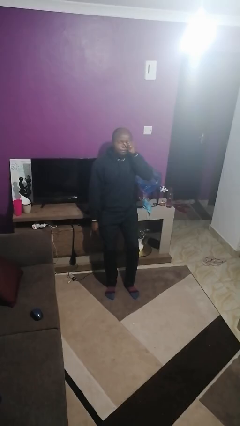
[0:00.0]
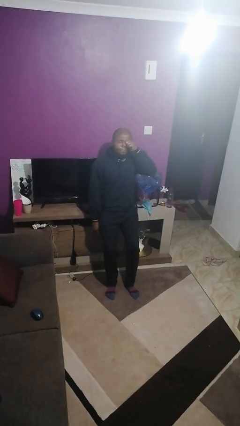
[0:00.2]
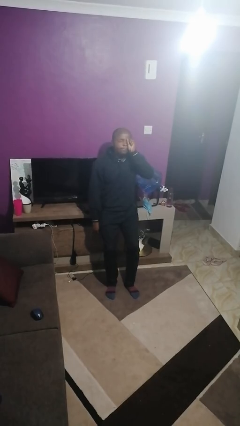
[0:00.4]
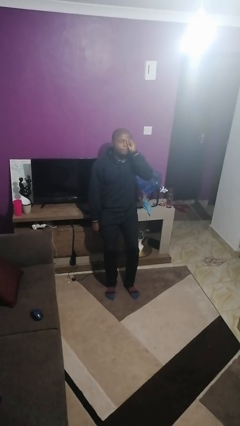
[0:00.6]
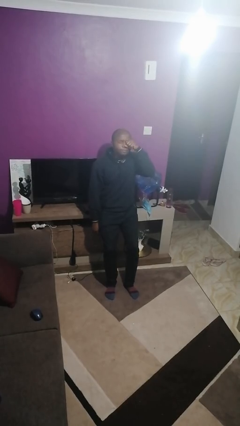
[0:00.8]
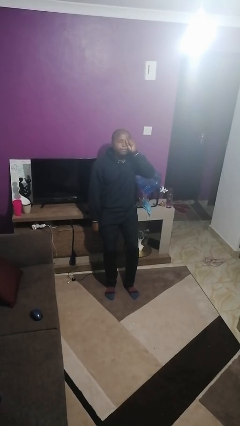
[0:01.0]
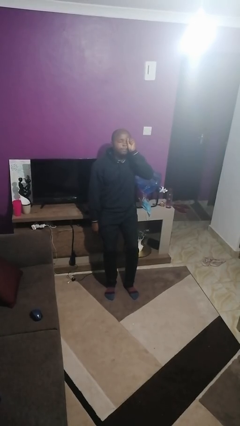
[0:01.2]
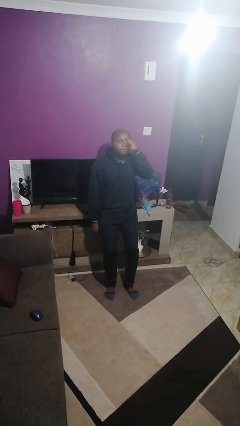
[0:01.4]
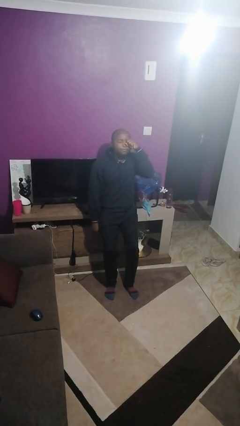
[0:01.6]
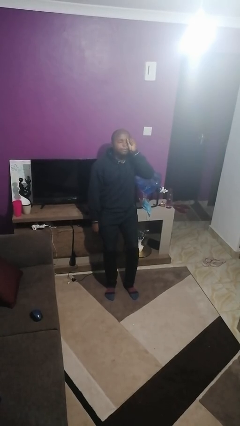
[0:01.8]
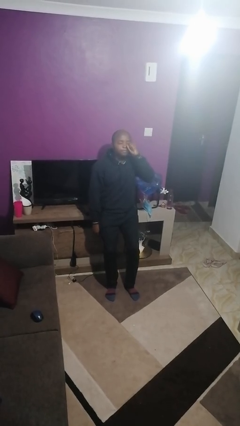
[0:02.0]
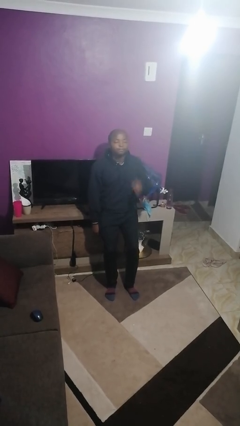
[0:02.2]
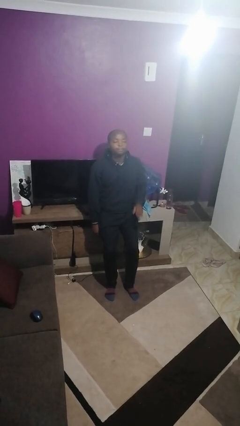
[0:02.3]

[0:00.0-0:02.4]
person rubs eyes

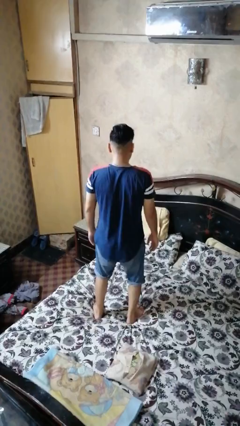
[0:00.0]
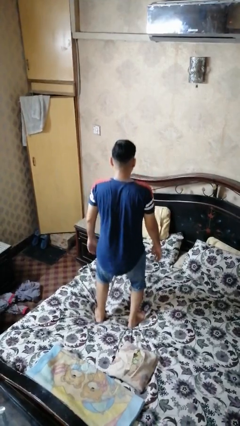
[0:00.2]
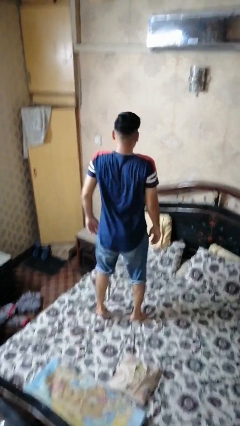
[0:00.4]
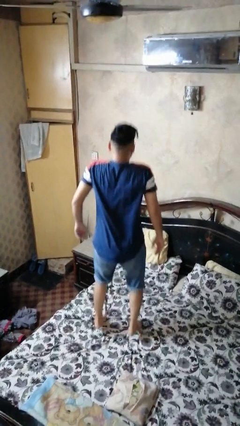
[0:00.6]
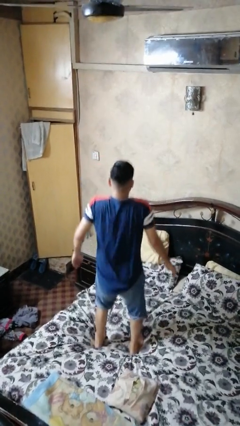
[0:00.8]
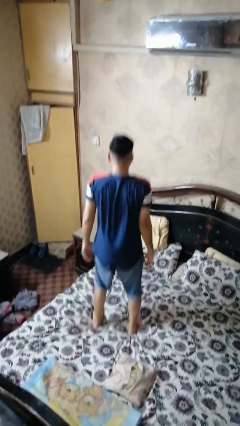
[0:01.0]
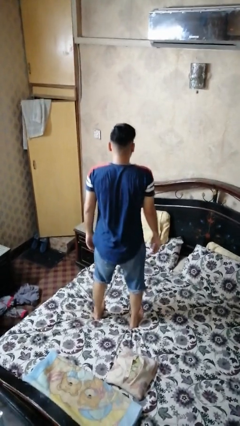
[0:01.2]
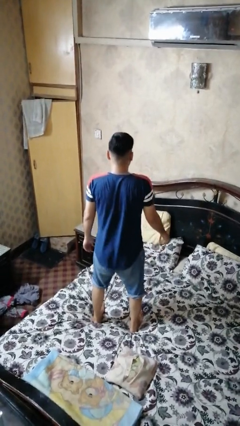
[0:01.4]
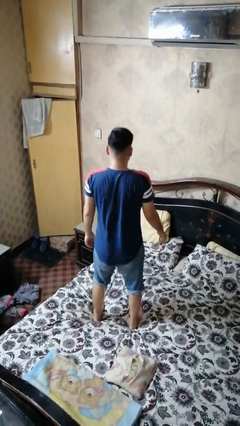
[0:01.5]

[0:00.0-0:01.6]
person jumps on bed

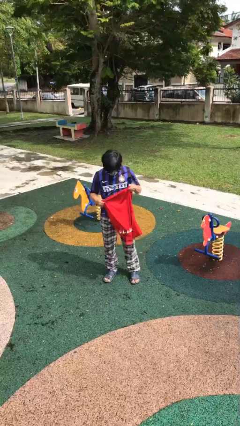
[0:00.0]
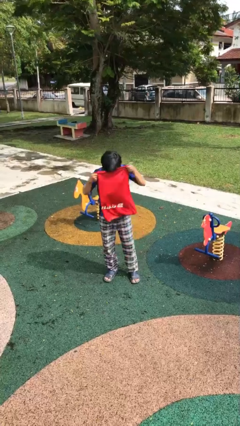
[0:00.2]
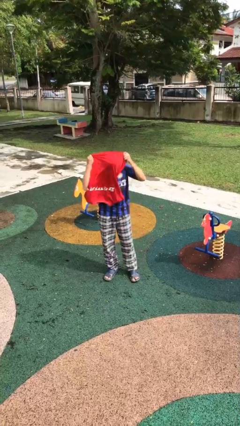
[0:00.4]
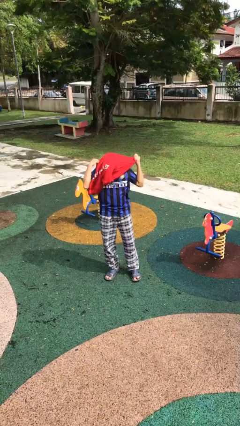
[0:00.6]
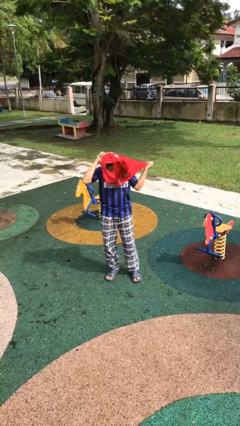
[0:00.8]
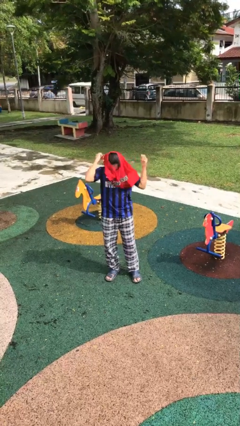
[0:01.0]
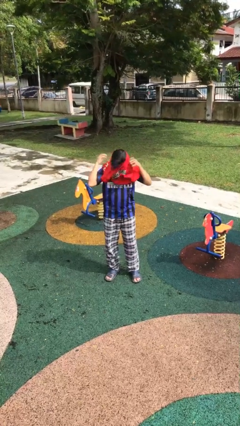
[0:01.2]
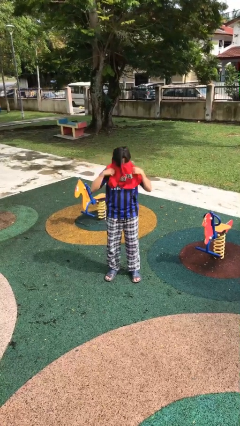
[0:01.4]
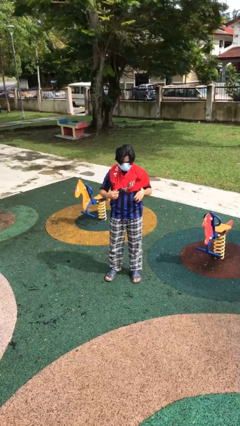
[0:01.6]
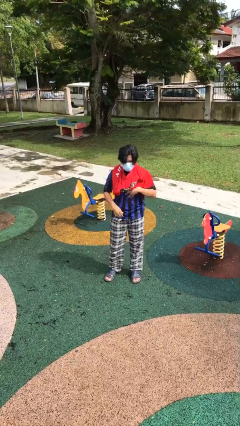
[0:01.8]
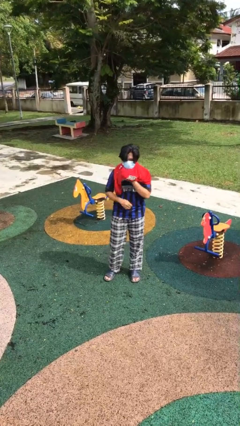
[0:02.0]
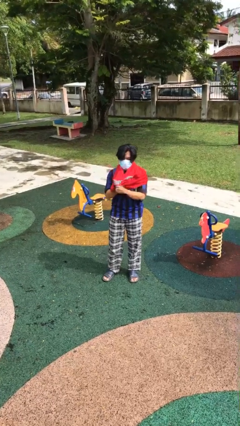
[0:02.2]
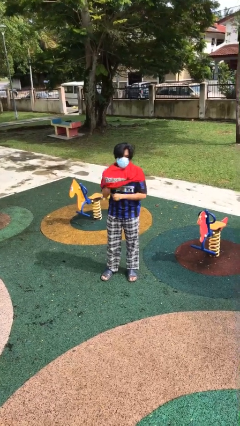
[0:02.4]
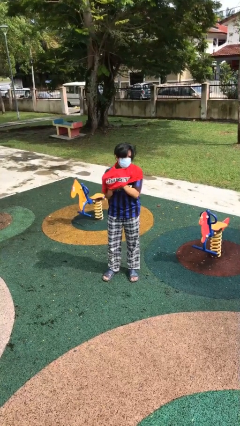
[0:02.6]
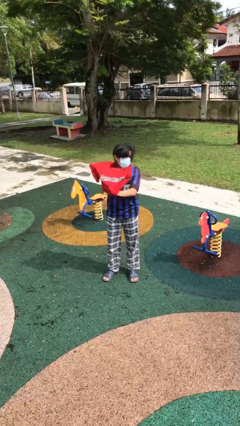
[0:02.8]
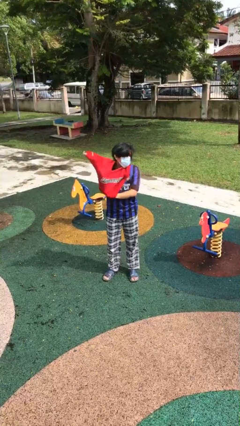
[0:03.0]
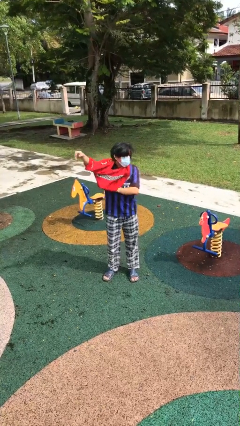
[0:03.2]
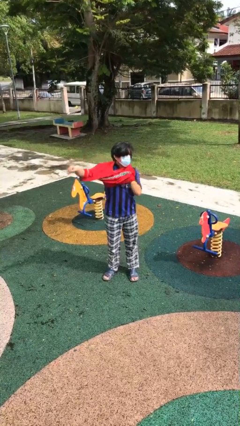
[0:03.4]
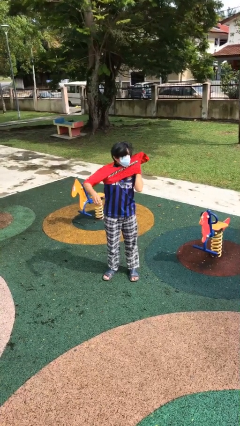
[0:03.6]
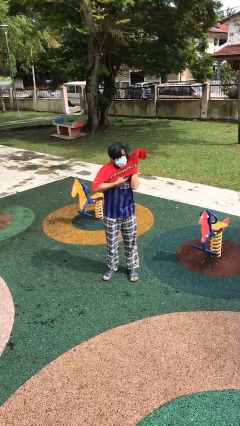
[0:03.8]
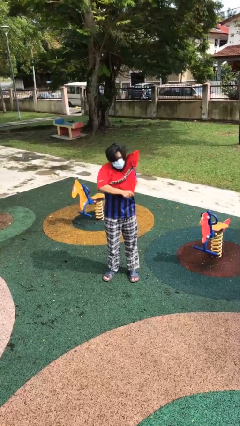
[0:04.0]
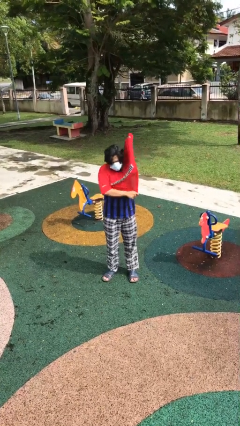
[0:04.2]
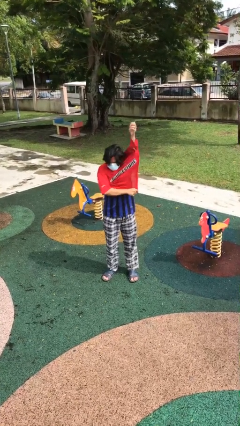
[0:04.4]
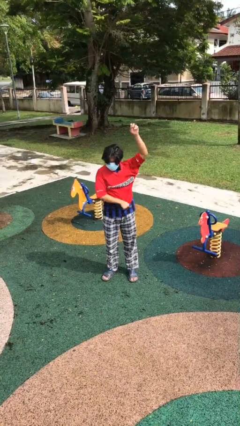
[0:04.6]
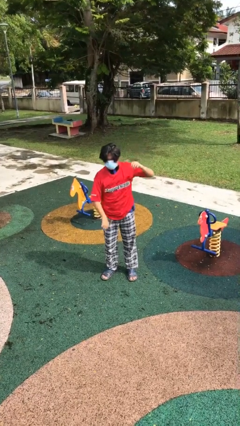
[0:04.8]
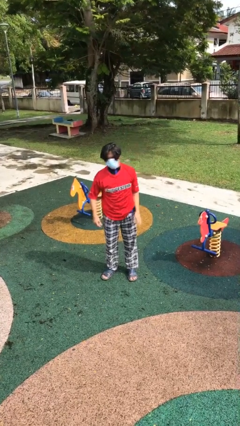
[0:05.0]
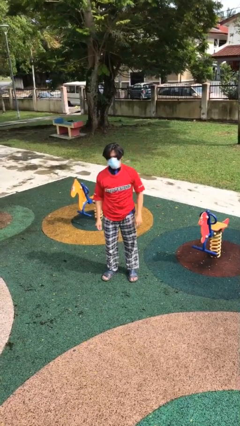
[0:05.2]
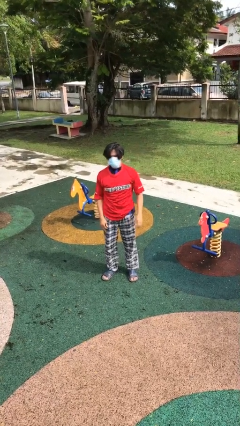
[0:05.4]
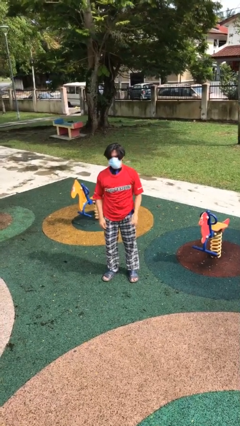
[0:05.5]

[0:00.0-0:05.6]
person puts on shirt

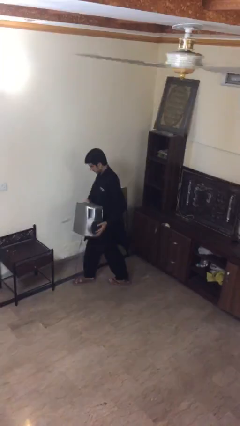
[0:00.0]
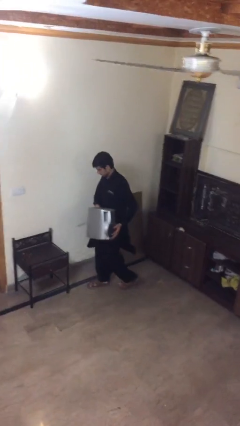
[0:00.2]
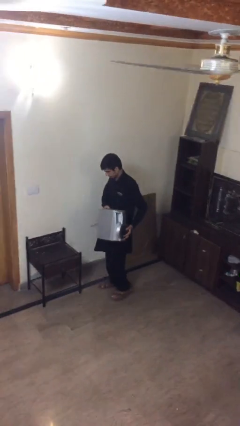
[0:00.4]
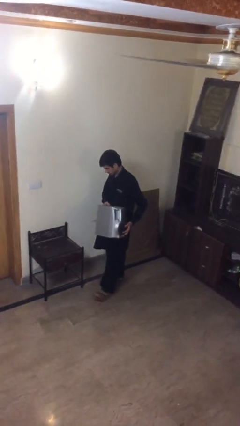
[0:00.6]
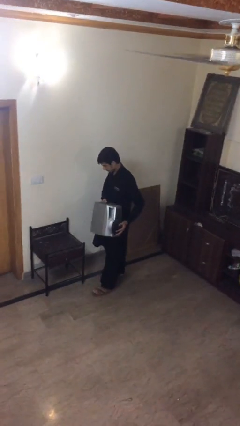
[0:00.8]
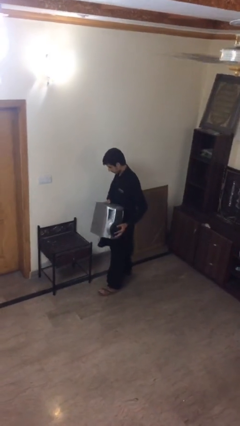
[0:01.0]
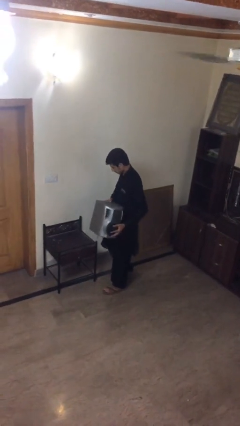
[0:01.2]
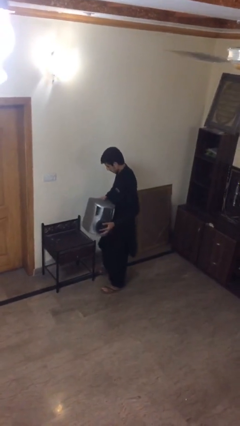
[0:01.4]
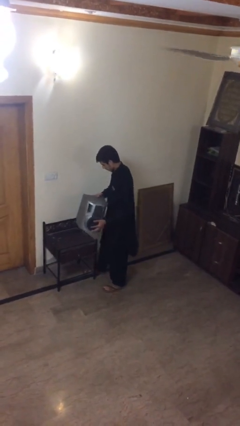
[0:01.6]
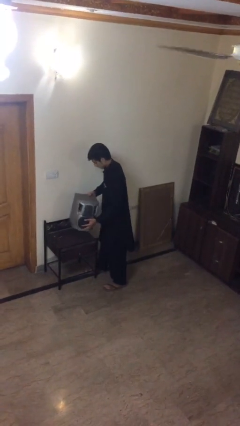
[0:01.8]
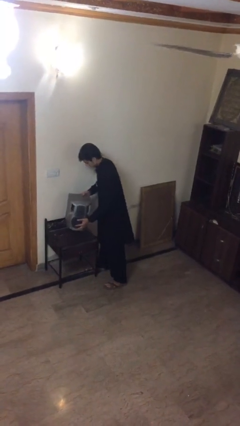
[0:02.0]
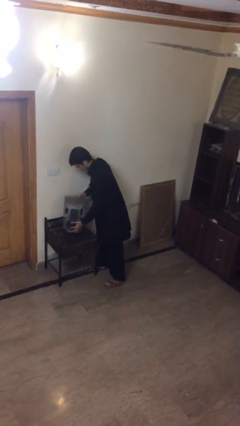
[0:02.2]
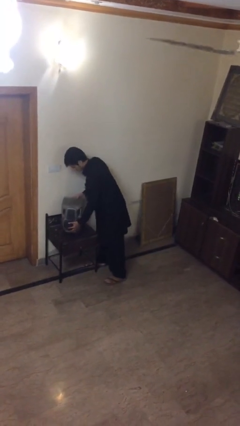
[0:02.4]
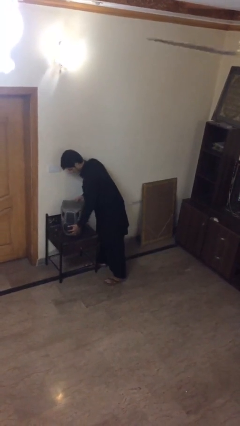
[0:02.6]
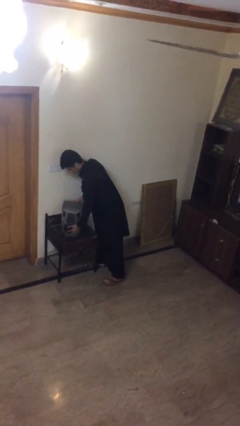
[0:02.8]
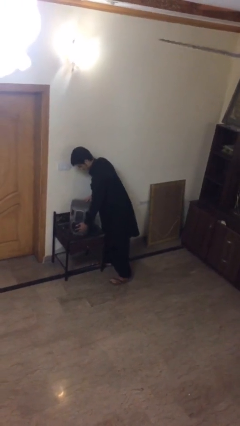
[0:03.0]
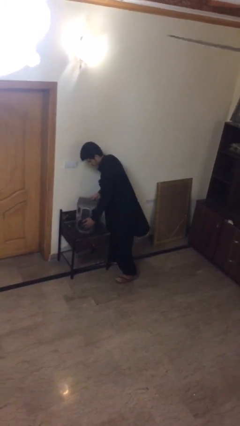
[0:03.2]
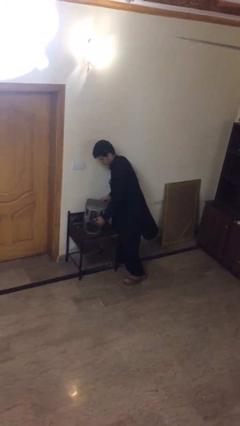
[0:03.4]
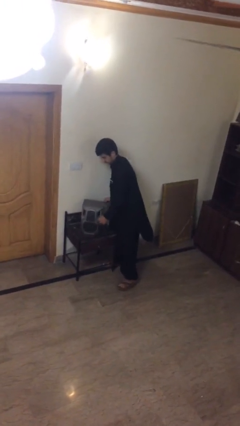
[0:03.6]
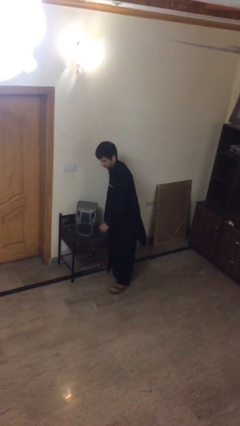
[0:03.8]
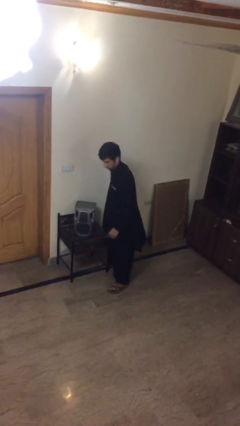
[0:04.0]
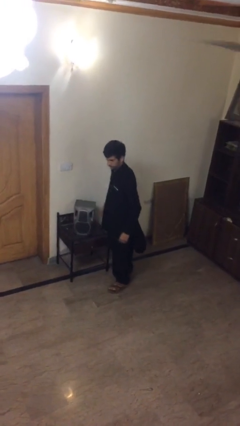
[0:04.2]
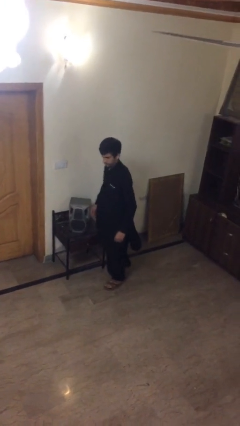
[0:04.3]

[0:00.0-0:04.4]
person puts down object on table

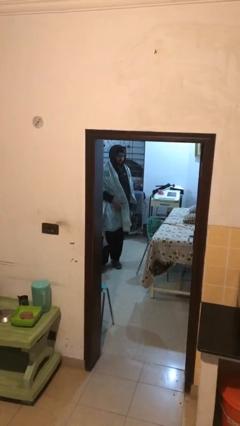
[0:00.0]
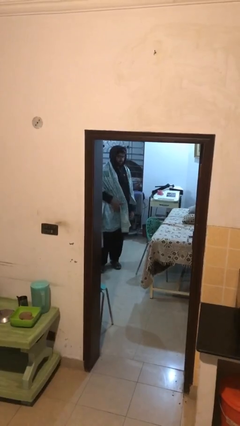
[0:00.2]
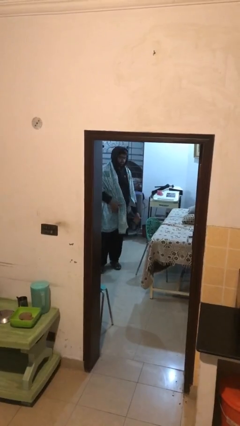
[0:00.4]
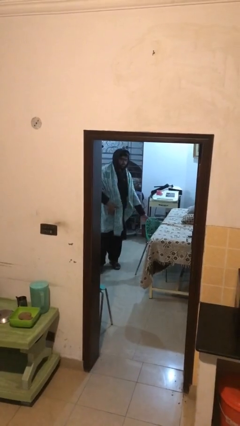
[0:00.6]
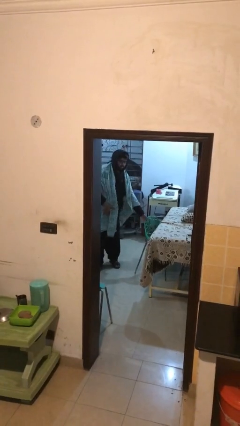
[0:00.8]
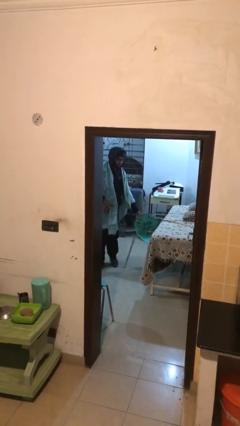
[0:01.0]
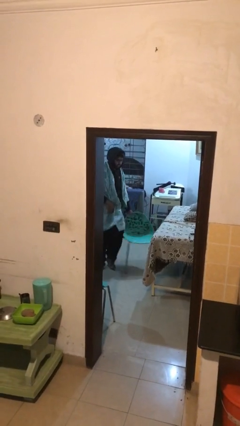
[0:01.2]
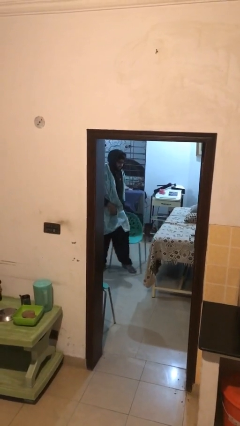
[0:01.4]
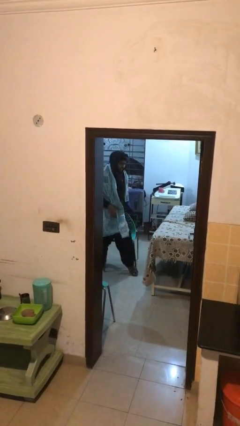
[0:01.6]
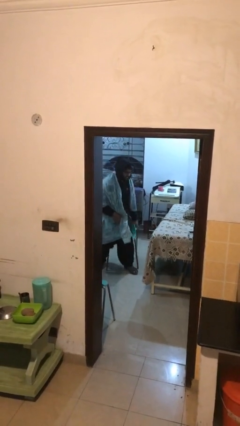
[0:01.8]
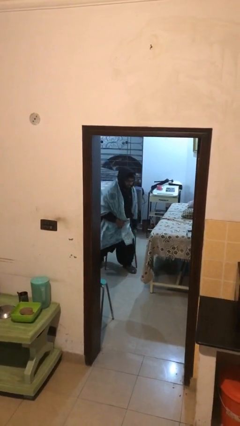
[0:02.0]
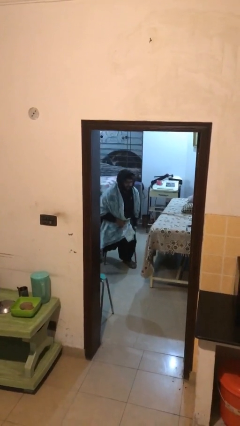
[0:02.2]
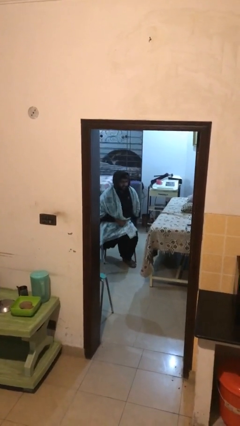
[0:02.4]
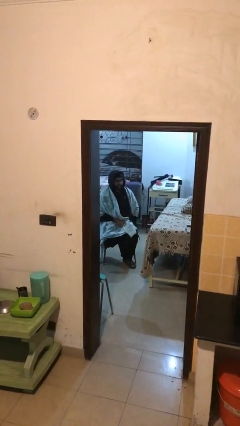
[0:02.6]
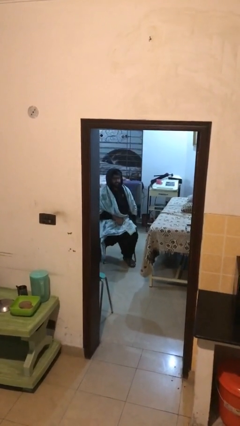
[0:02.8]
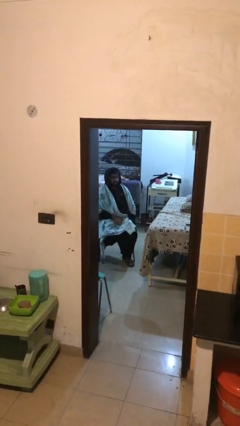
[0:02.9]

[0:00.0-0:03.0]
person sits down

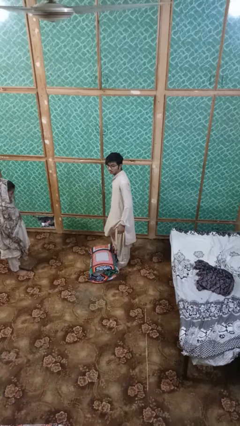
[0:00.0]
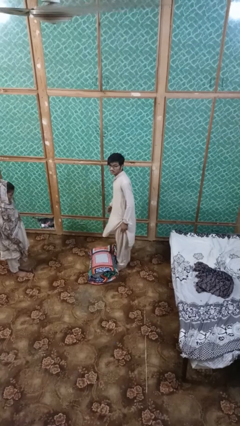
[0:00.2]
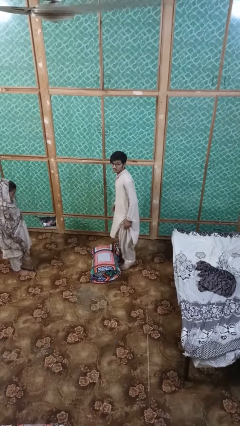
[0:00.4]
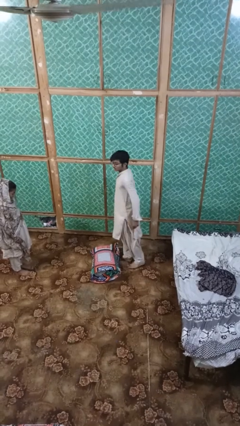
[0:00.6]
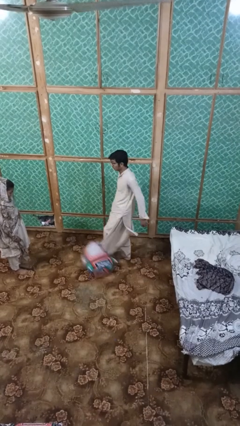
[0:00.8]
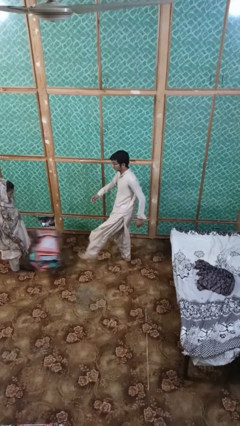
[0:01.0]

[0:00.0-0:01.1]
person kicks object to person
